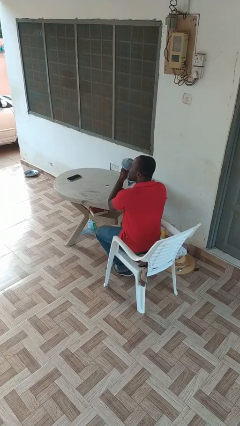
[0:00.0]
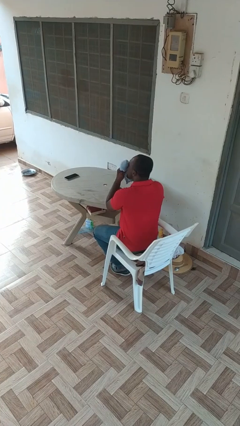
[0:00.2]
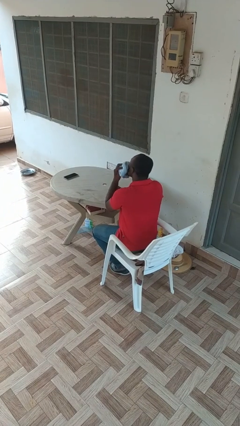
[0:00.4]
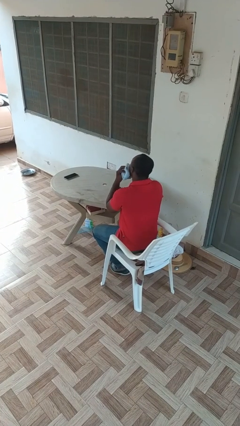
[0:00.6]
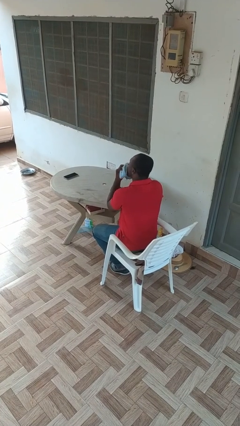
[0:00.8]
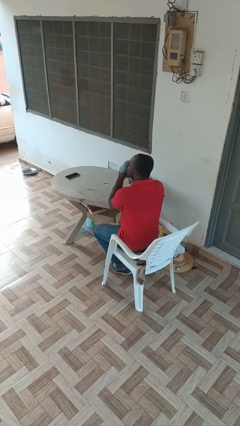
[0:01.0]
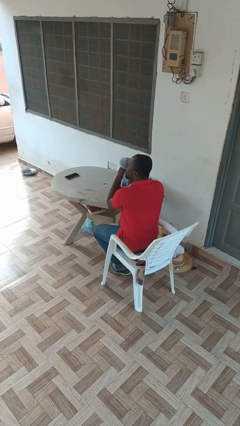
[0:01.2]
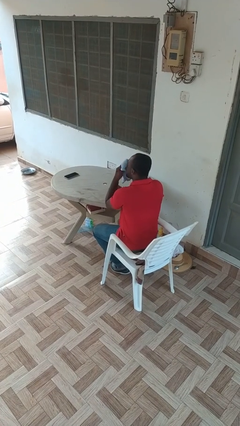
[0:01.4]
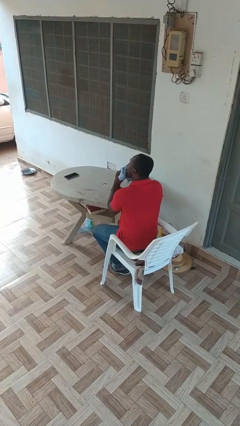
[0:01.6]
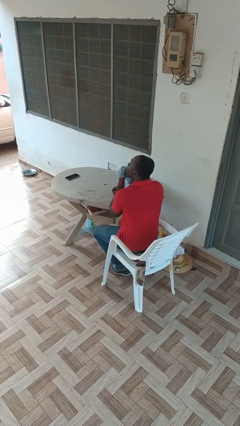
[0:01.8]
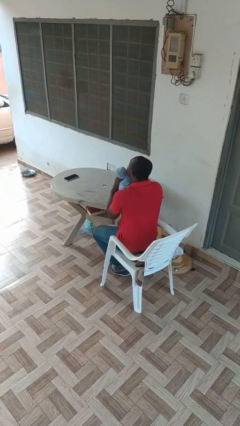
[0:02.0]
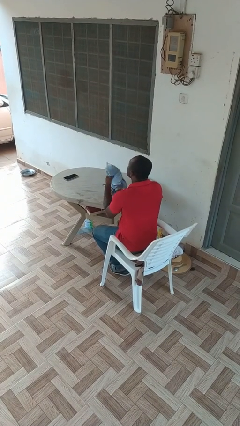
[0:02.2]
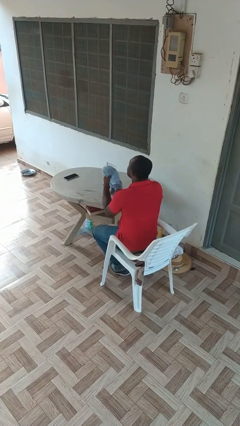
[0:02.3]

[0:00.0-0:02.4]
person wipes mouth with napkin

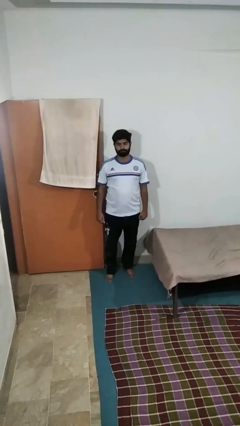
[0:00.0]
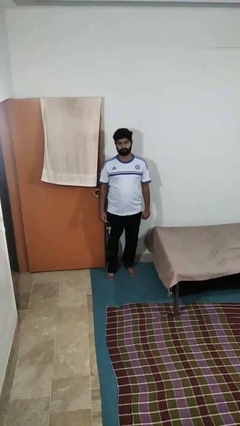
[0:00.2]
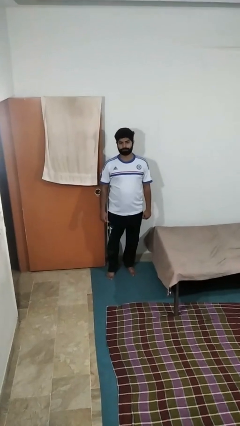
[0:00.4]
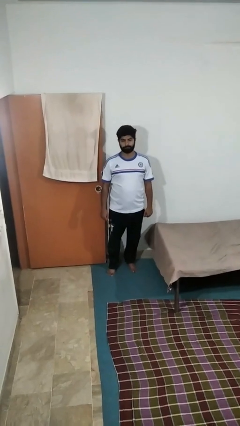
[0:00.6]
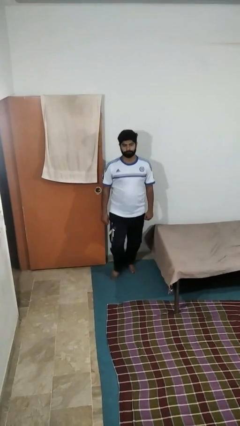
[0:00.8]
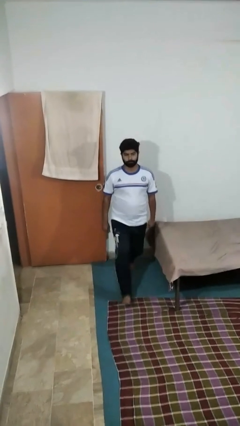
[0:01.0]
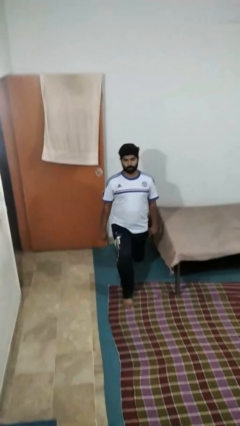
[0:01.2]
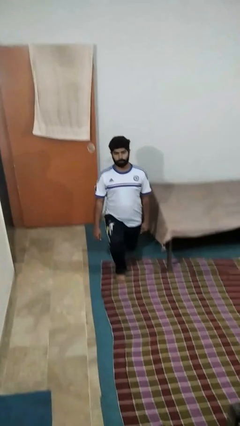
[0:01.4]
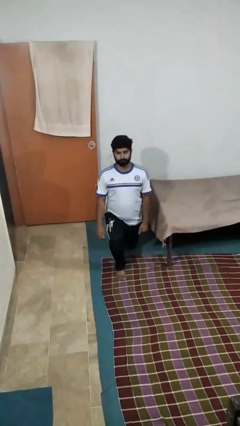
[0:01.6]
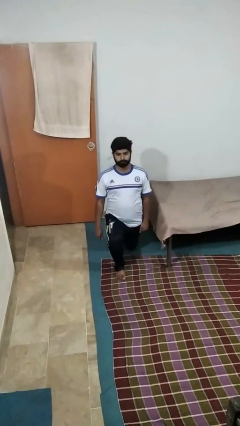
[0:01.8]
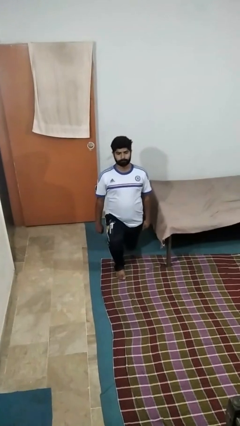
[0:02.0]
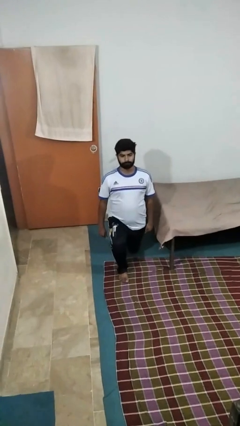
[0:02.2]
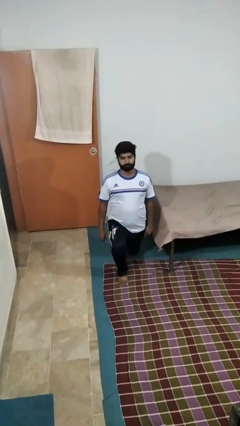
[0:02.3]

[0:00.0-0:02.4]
person kneels

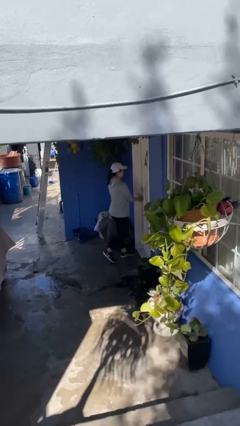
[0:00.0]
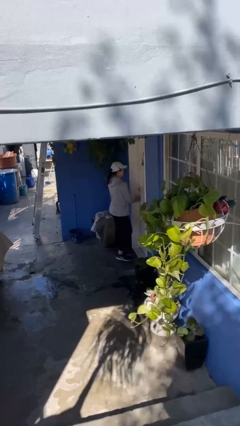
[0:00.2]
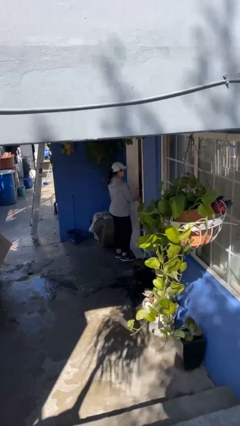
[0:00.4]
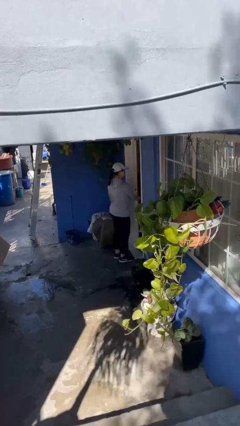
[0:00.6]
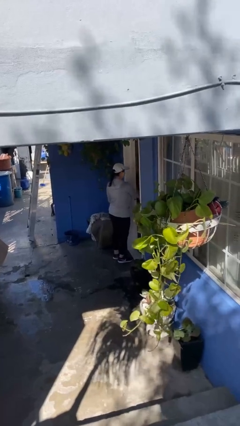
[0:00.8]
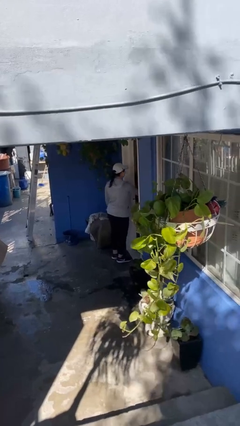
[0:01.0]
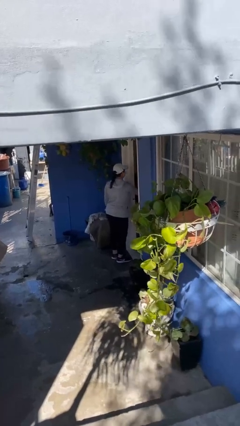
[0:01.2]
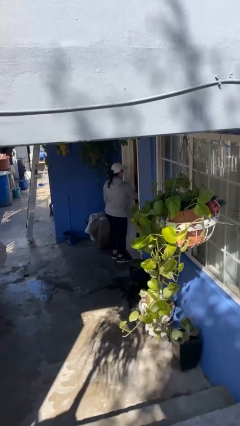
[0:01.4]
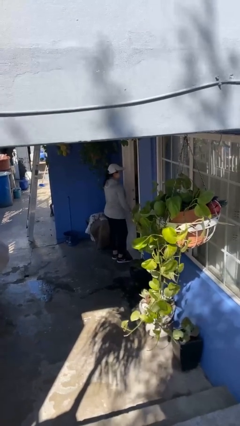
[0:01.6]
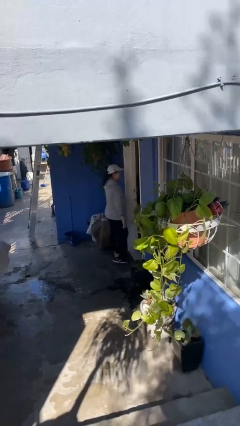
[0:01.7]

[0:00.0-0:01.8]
person opens facility door

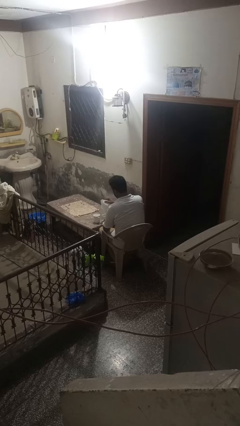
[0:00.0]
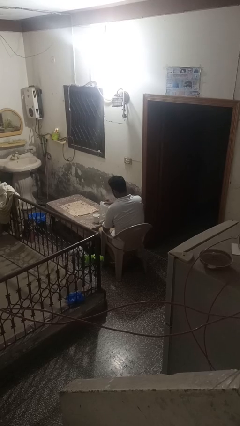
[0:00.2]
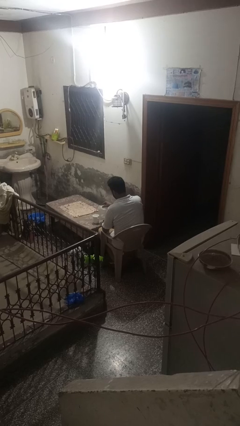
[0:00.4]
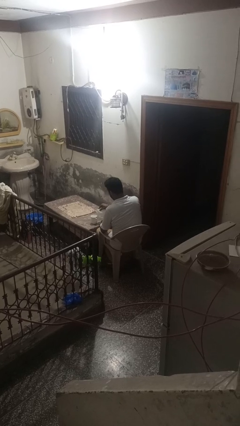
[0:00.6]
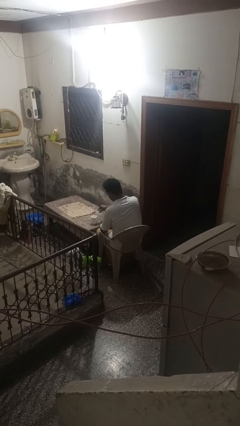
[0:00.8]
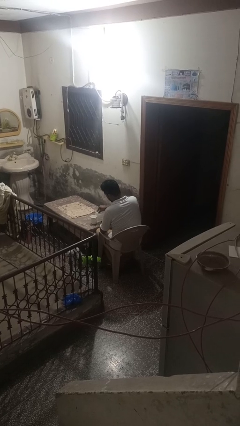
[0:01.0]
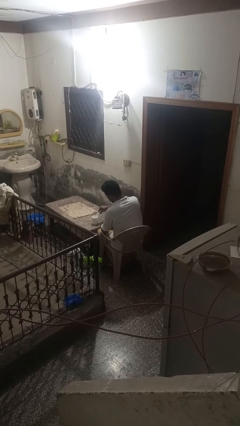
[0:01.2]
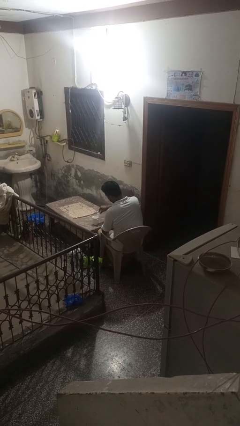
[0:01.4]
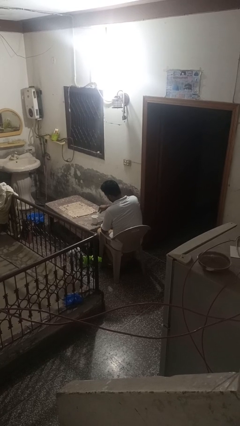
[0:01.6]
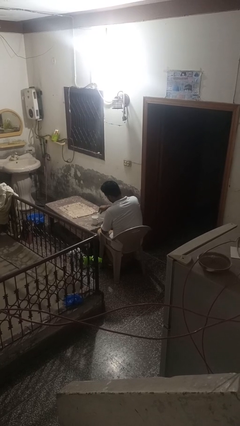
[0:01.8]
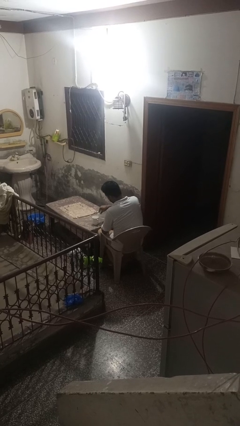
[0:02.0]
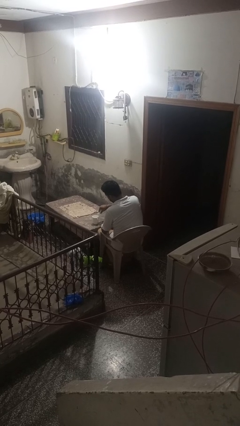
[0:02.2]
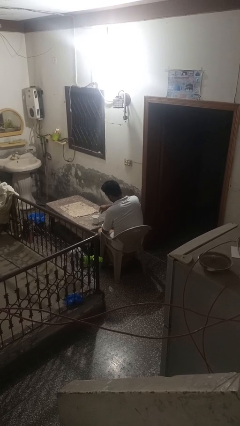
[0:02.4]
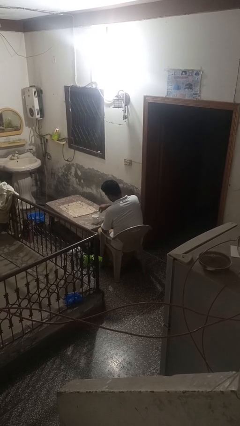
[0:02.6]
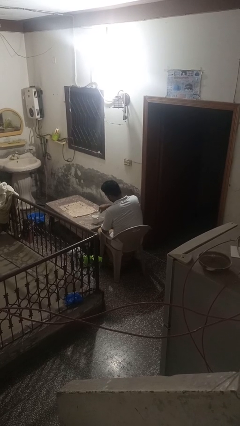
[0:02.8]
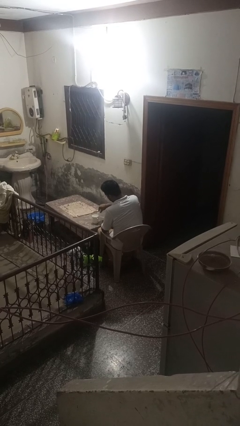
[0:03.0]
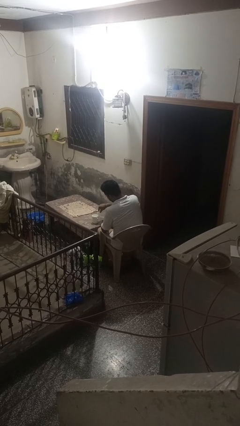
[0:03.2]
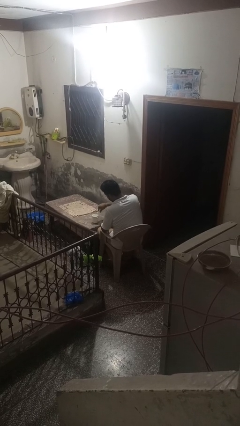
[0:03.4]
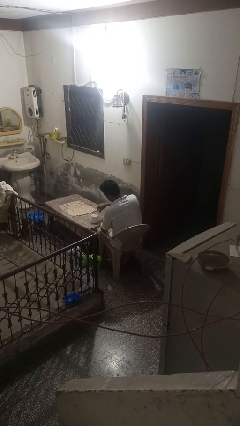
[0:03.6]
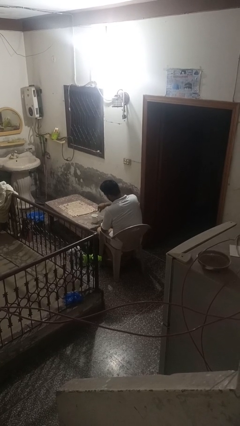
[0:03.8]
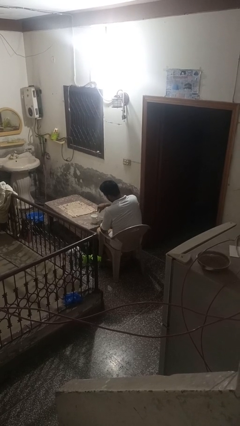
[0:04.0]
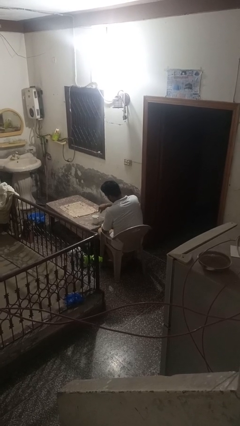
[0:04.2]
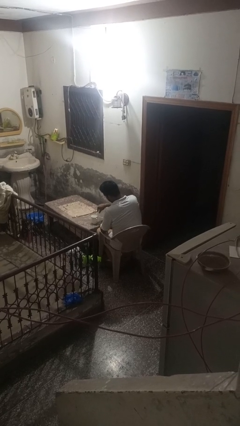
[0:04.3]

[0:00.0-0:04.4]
person pours liquid into cup

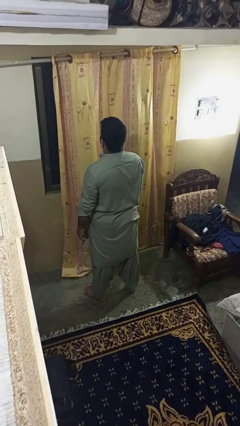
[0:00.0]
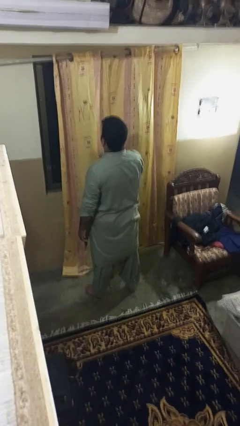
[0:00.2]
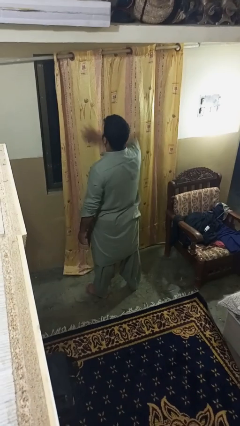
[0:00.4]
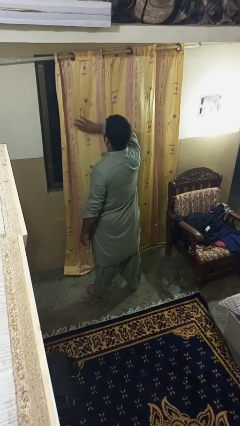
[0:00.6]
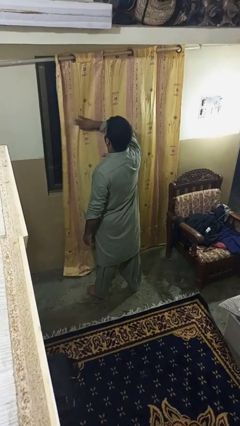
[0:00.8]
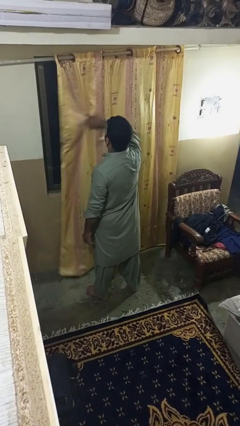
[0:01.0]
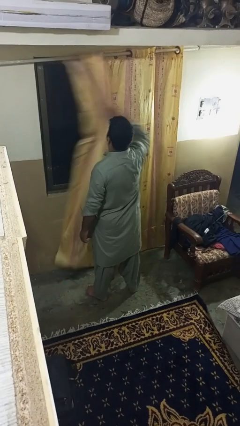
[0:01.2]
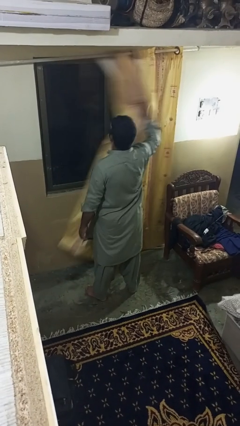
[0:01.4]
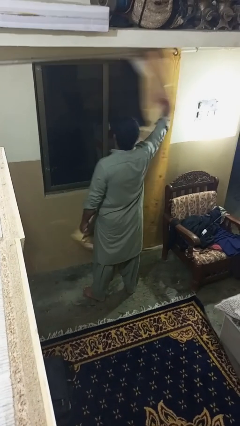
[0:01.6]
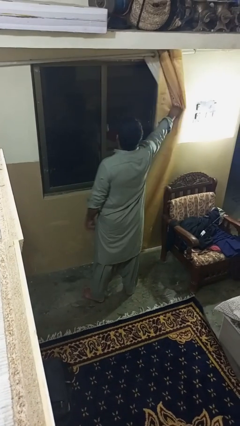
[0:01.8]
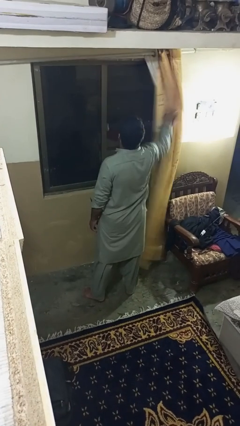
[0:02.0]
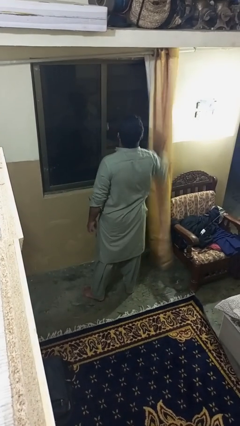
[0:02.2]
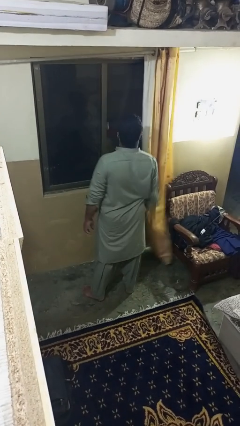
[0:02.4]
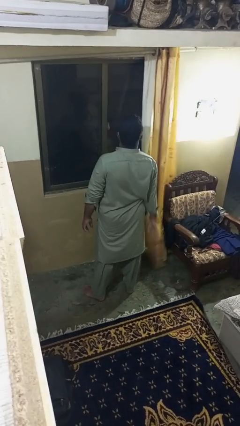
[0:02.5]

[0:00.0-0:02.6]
person opens curtains

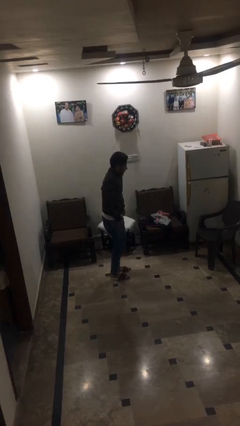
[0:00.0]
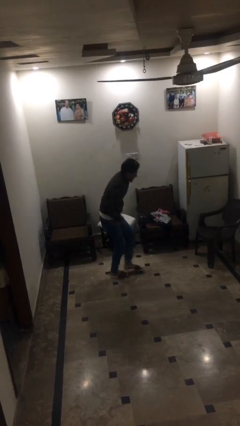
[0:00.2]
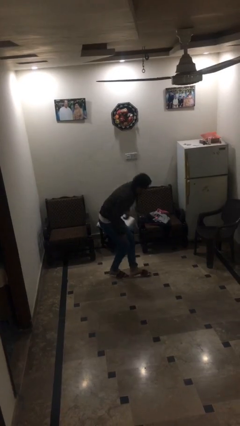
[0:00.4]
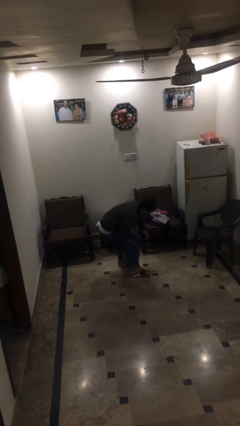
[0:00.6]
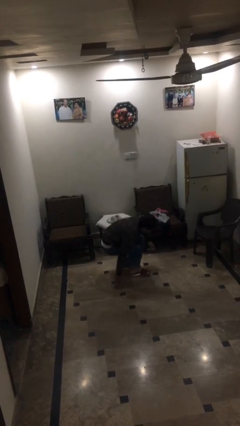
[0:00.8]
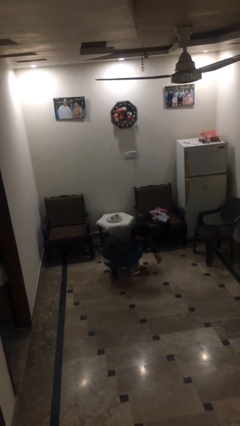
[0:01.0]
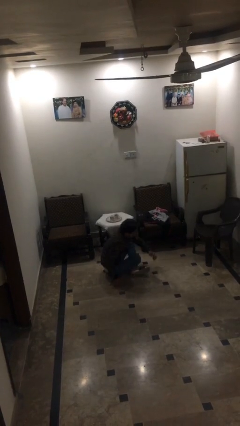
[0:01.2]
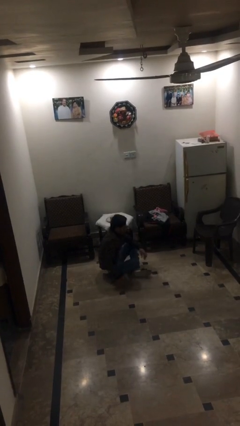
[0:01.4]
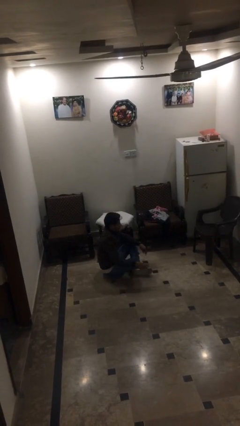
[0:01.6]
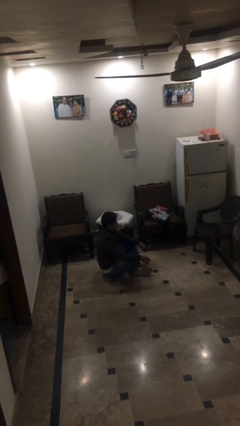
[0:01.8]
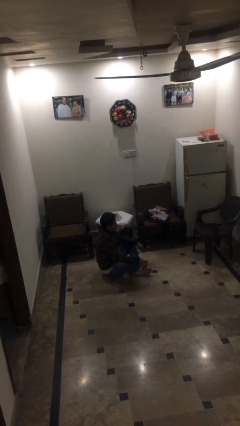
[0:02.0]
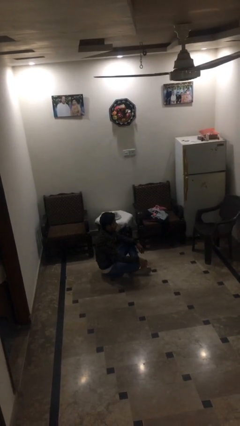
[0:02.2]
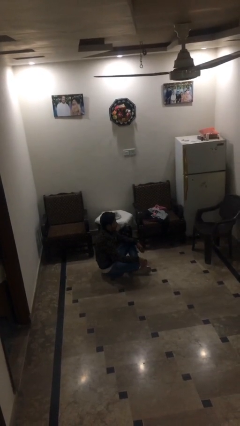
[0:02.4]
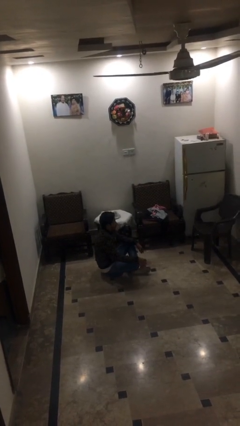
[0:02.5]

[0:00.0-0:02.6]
person sits down

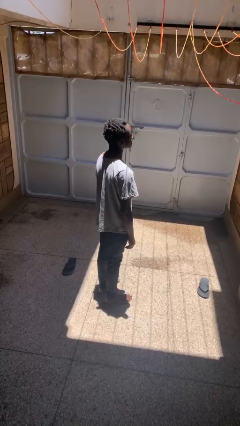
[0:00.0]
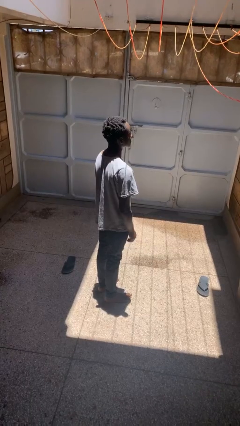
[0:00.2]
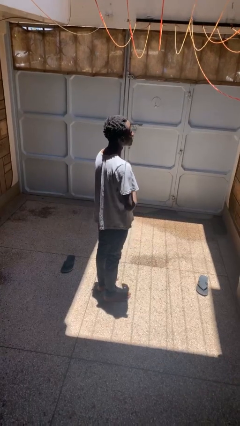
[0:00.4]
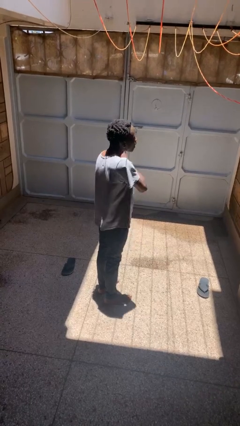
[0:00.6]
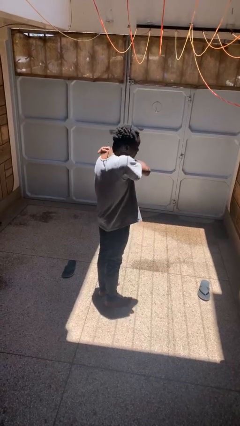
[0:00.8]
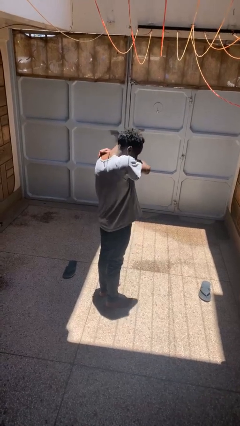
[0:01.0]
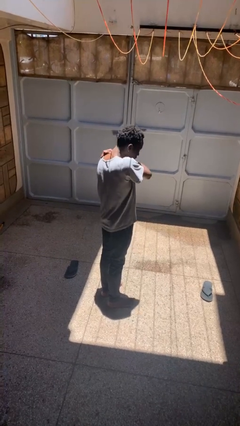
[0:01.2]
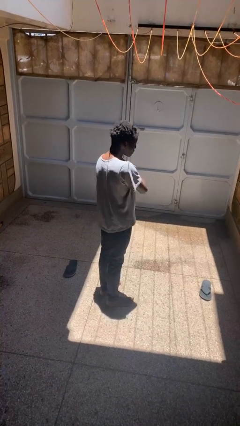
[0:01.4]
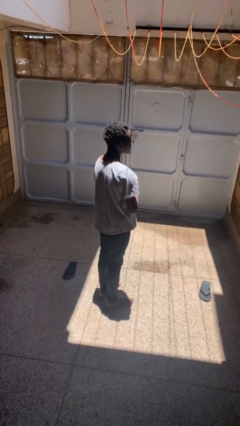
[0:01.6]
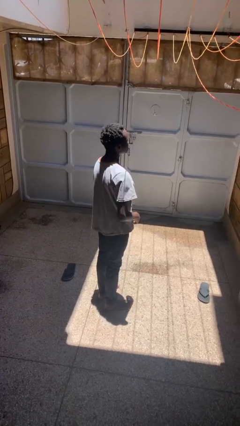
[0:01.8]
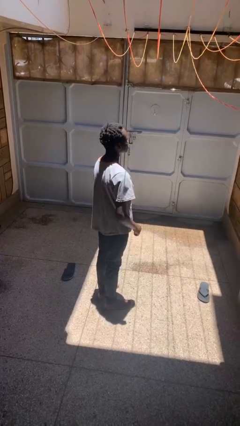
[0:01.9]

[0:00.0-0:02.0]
person sneezes into arm
